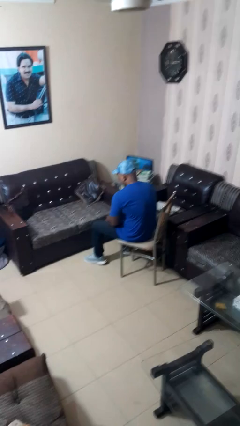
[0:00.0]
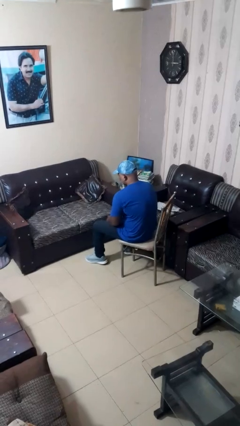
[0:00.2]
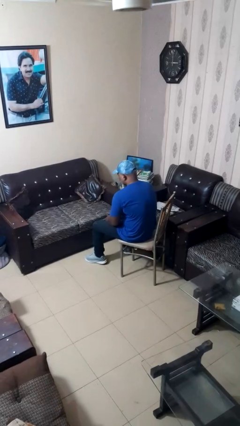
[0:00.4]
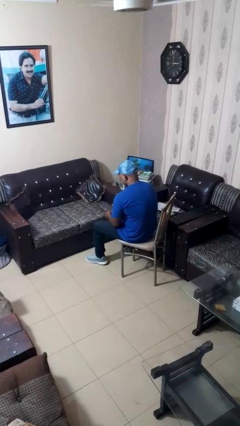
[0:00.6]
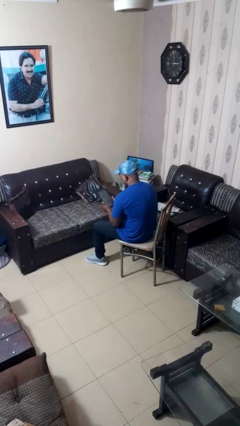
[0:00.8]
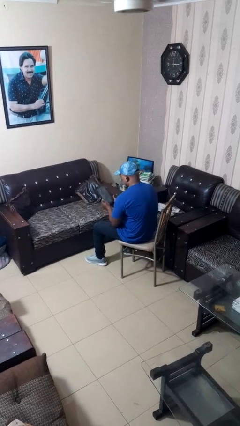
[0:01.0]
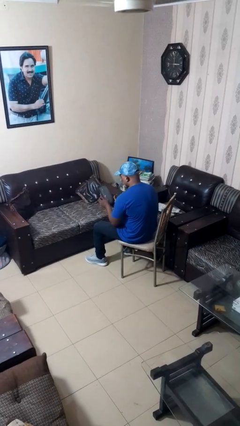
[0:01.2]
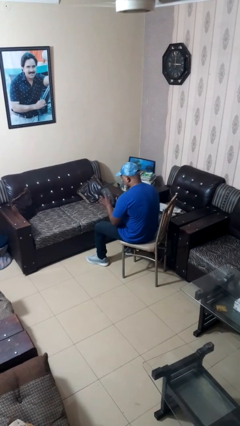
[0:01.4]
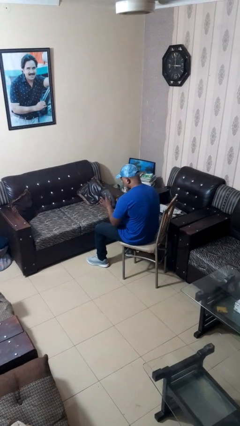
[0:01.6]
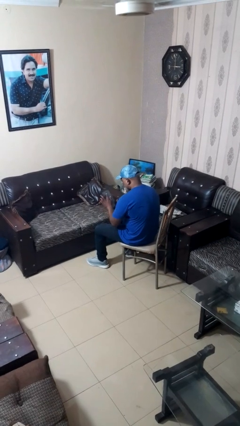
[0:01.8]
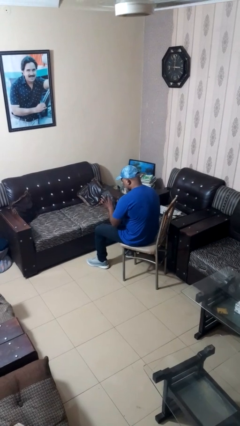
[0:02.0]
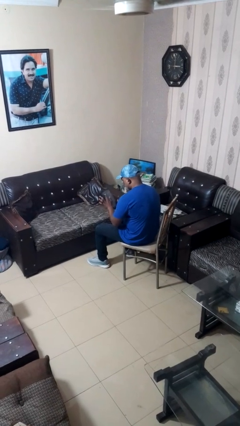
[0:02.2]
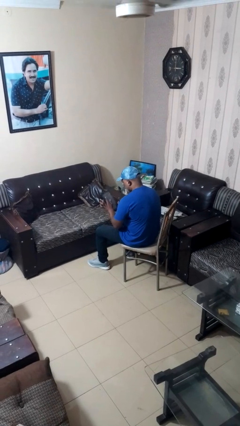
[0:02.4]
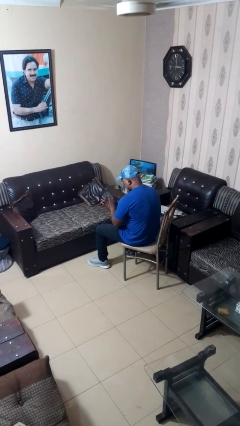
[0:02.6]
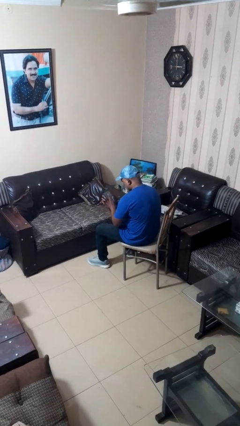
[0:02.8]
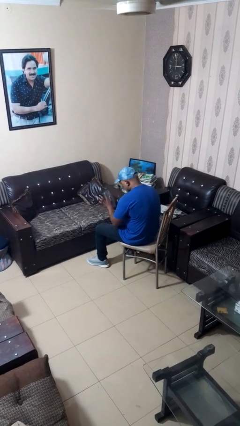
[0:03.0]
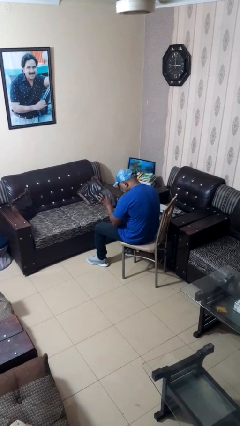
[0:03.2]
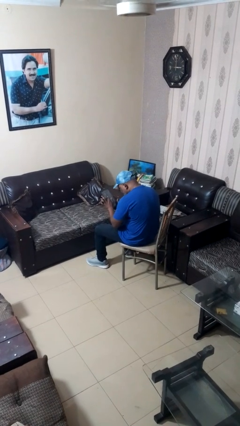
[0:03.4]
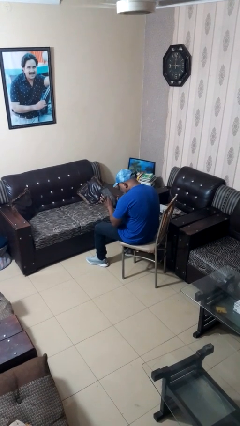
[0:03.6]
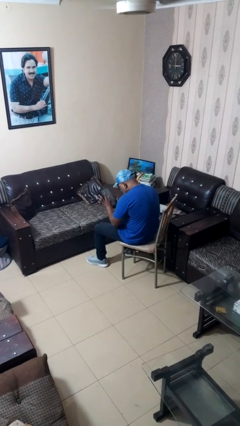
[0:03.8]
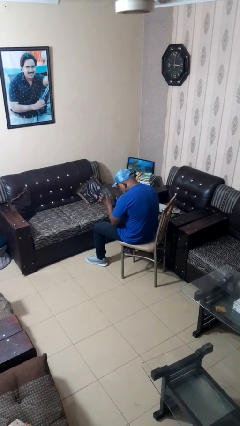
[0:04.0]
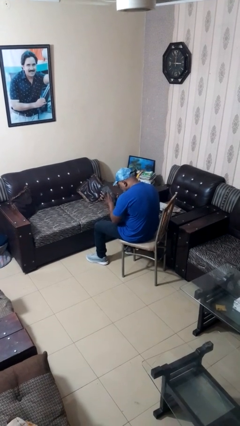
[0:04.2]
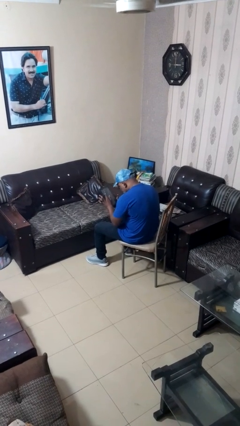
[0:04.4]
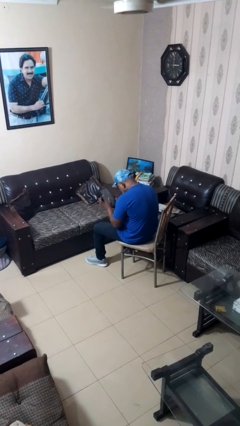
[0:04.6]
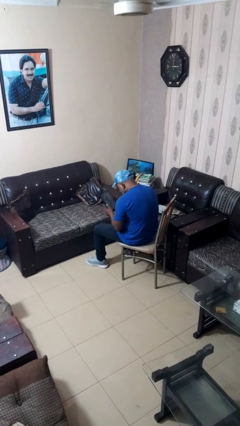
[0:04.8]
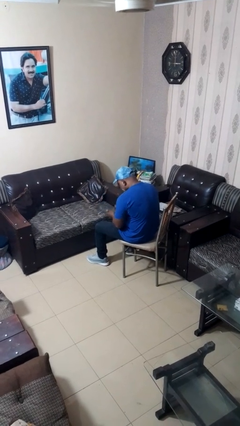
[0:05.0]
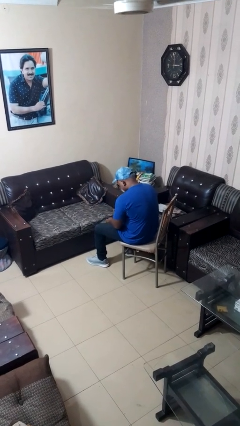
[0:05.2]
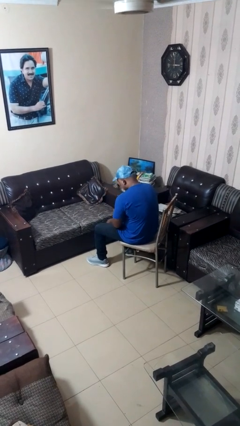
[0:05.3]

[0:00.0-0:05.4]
person interacts with tablet

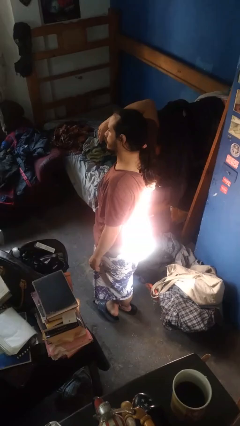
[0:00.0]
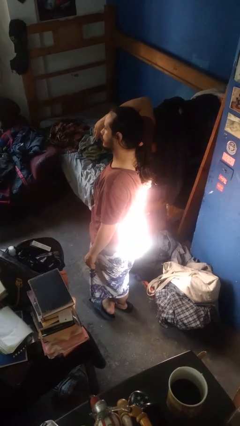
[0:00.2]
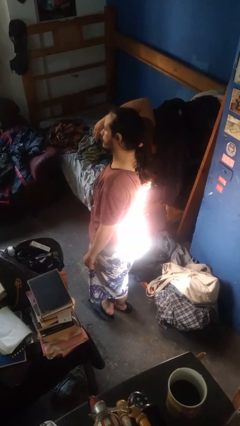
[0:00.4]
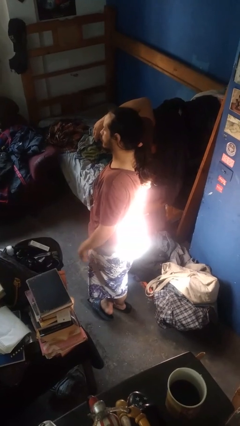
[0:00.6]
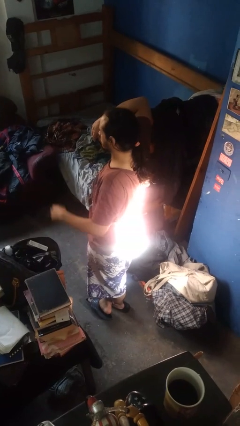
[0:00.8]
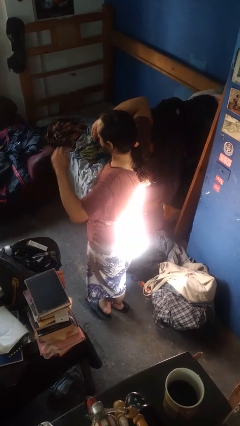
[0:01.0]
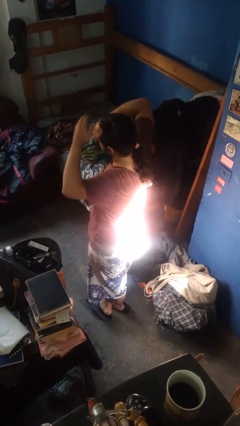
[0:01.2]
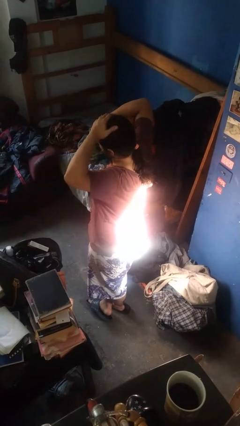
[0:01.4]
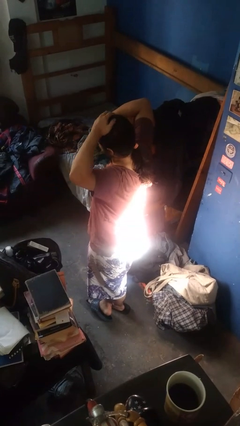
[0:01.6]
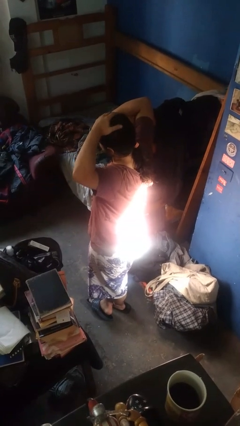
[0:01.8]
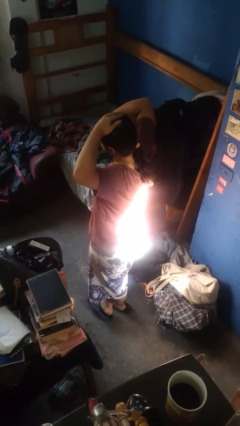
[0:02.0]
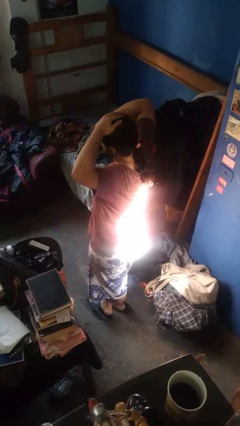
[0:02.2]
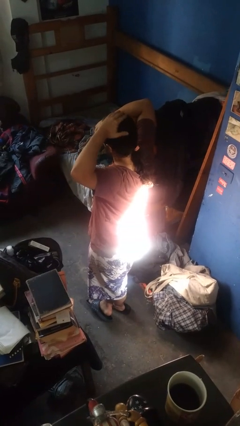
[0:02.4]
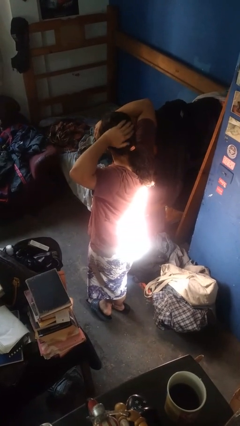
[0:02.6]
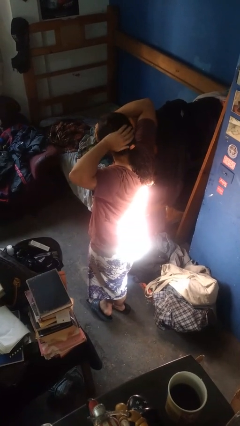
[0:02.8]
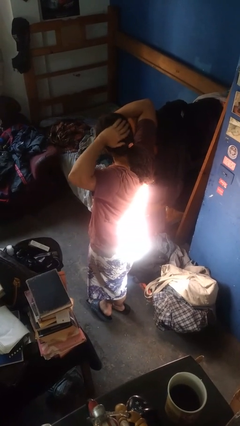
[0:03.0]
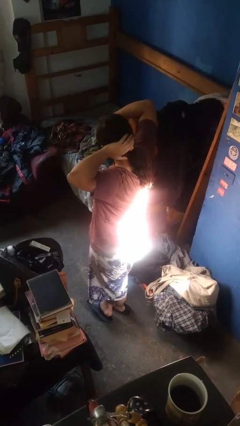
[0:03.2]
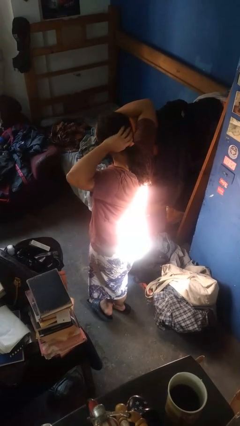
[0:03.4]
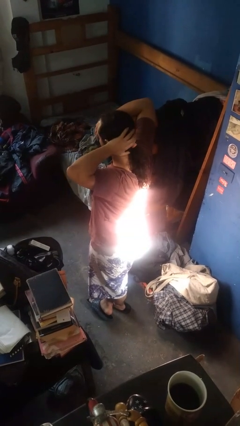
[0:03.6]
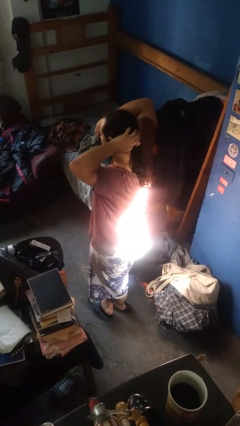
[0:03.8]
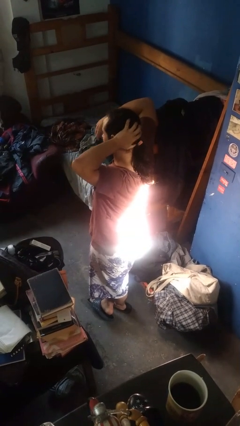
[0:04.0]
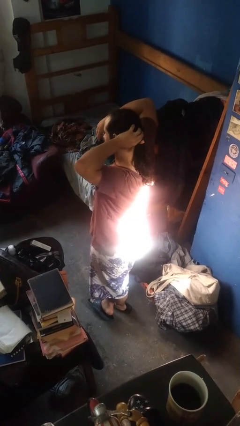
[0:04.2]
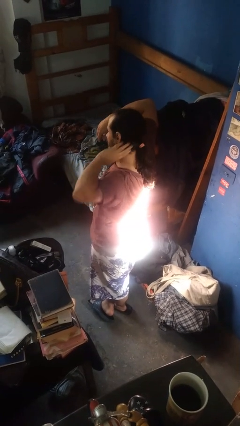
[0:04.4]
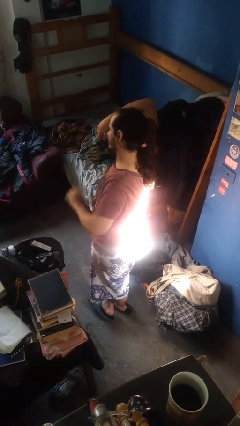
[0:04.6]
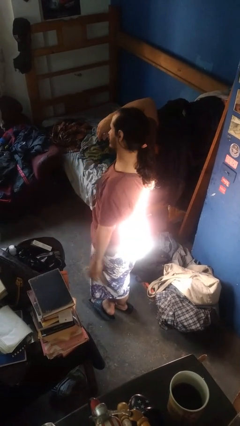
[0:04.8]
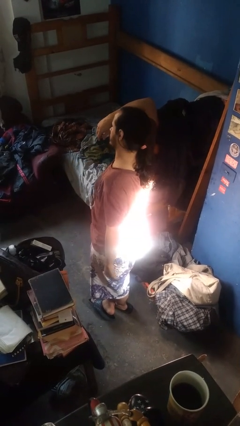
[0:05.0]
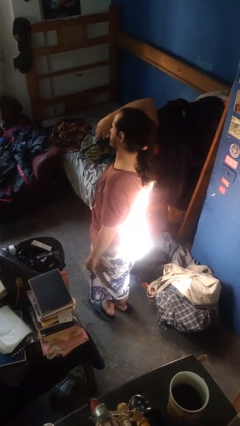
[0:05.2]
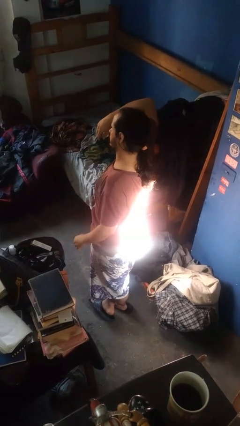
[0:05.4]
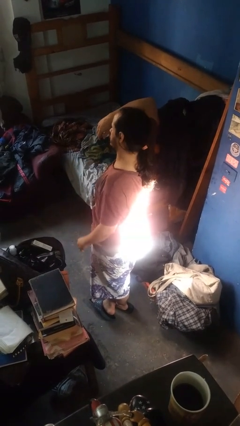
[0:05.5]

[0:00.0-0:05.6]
person strokes hair

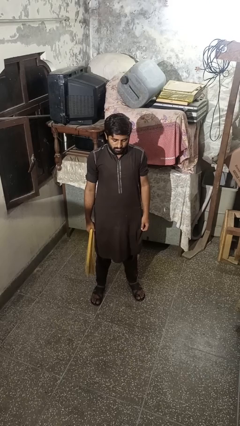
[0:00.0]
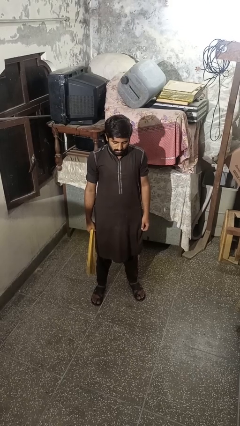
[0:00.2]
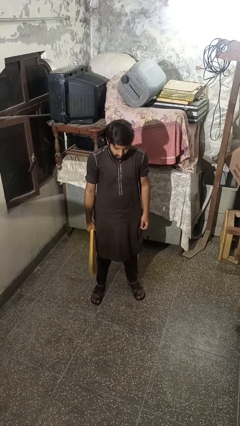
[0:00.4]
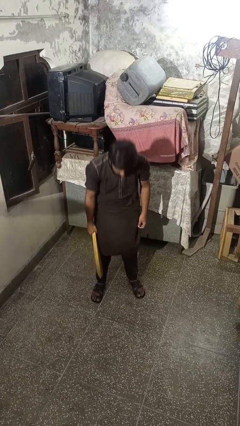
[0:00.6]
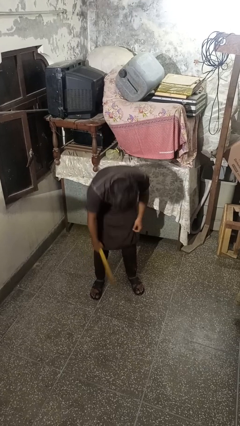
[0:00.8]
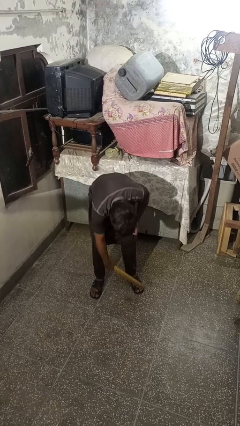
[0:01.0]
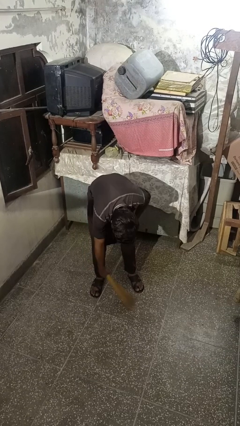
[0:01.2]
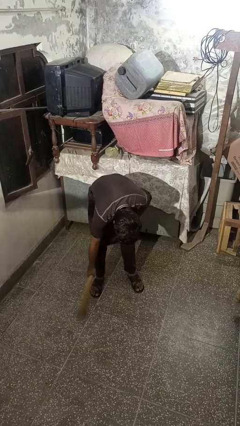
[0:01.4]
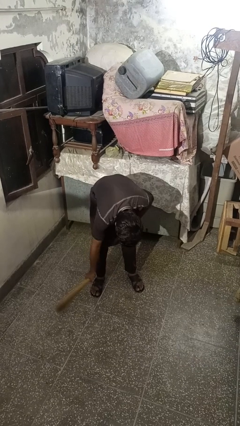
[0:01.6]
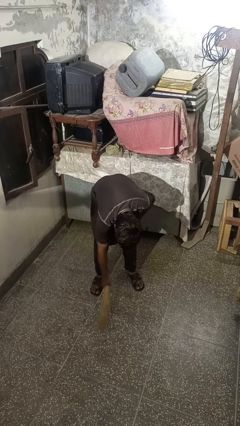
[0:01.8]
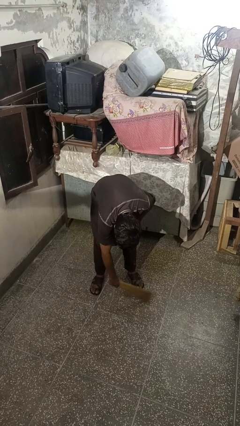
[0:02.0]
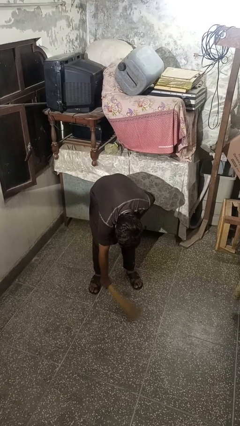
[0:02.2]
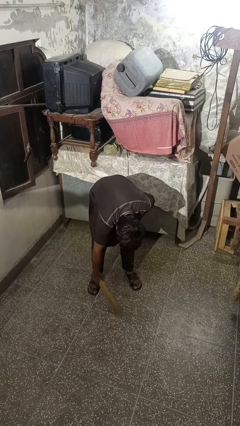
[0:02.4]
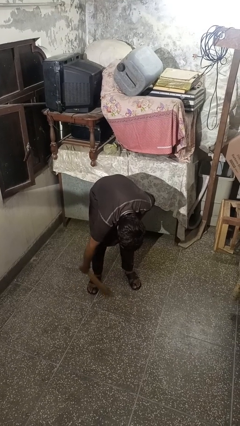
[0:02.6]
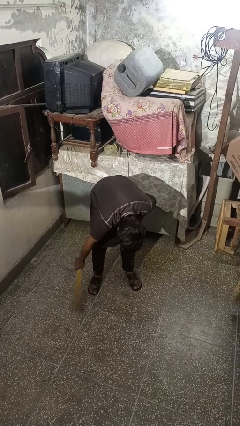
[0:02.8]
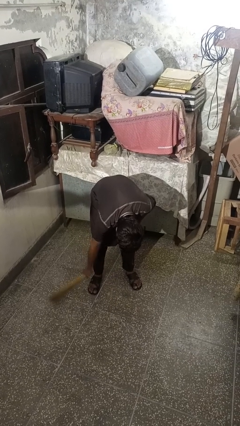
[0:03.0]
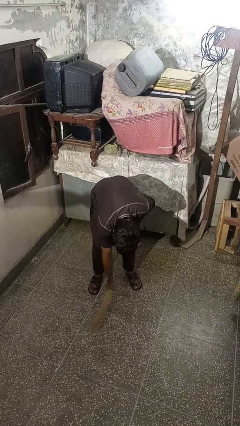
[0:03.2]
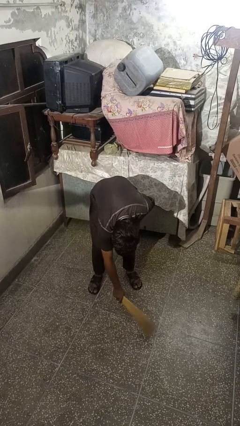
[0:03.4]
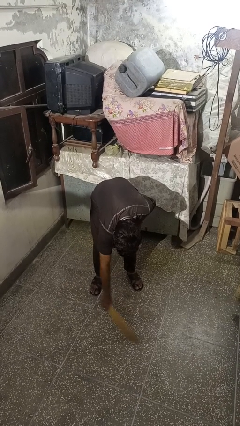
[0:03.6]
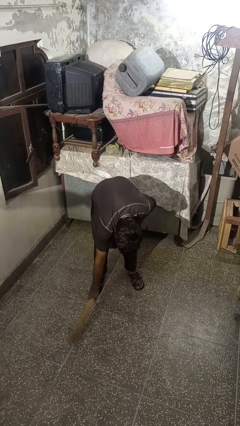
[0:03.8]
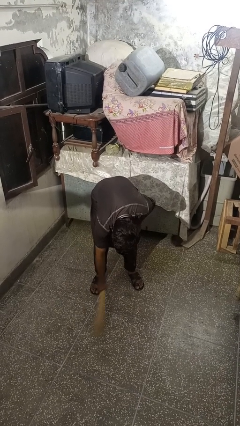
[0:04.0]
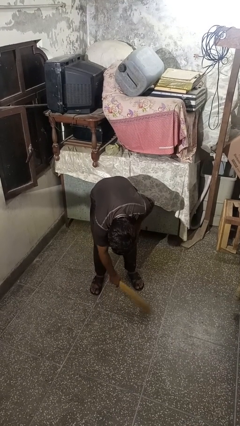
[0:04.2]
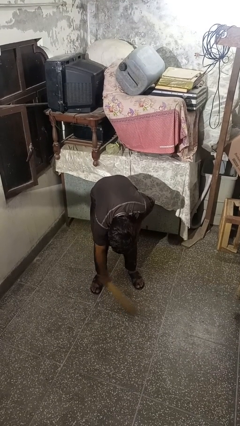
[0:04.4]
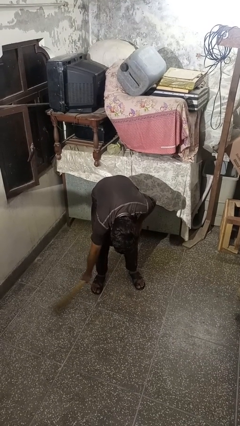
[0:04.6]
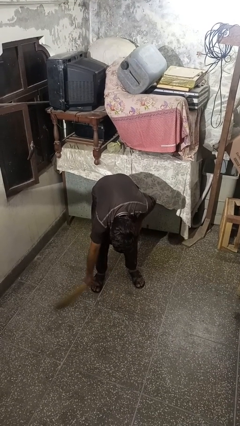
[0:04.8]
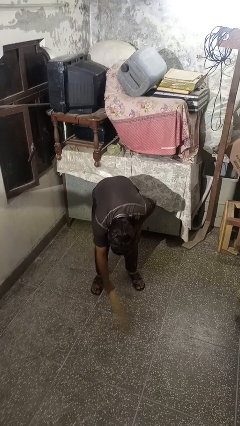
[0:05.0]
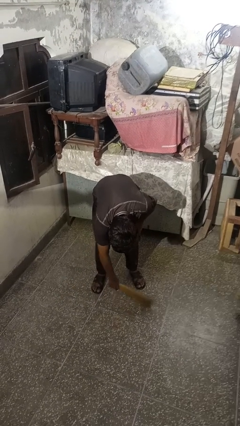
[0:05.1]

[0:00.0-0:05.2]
person sweeps floor

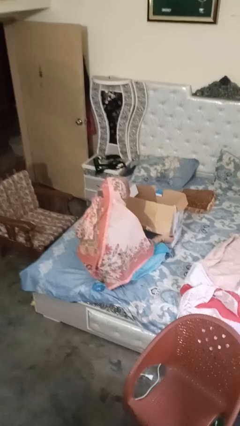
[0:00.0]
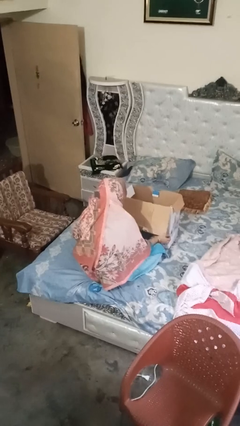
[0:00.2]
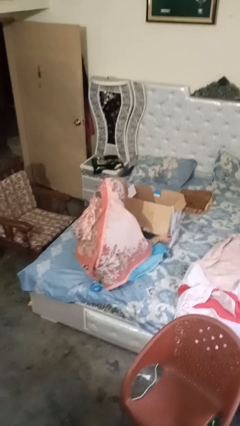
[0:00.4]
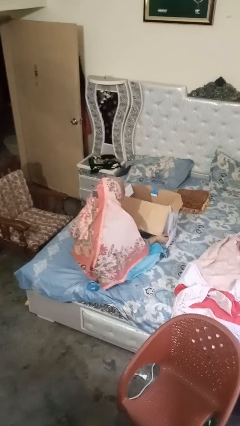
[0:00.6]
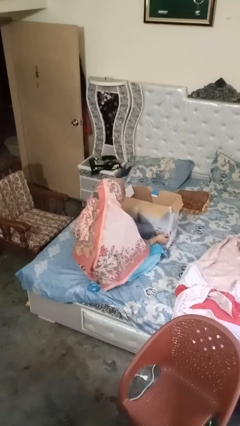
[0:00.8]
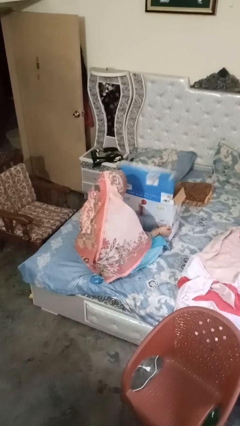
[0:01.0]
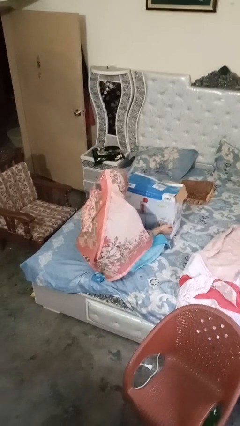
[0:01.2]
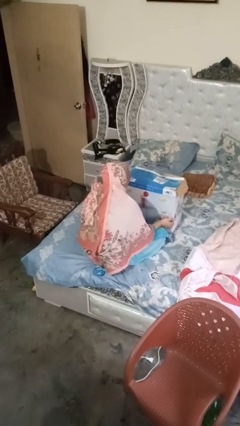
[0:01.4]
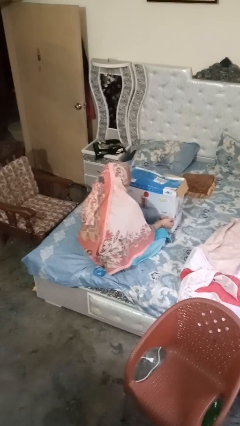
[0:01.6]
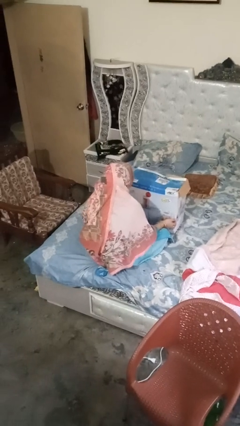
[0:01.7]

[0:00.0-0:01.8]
person closes box
